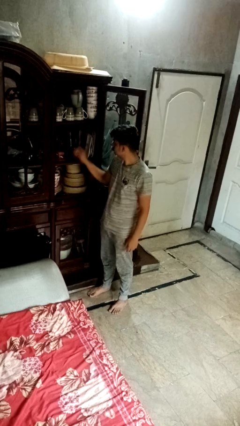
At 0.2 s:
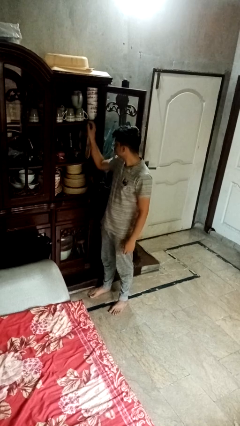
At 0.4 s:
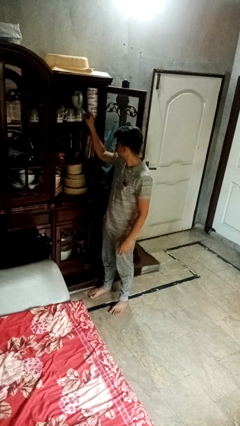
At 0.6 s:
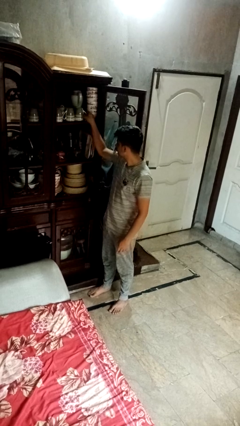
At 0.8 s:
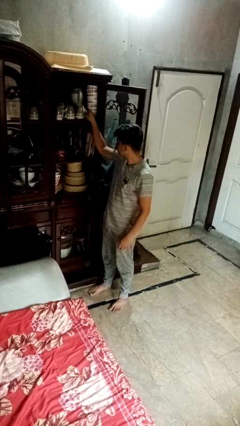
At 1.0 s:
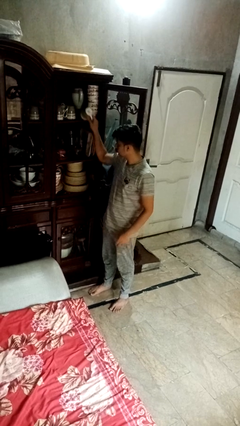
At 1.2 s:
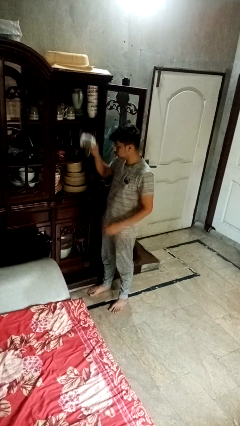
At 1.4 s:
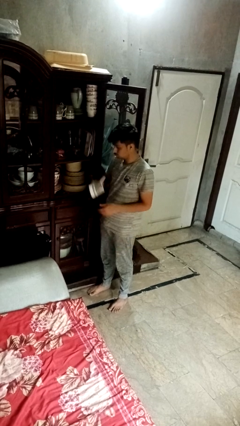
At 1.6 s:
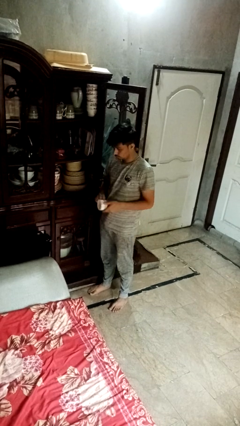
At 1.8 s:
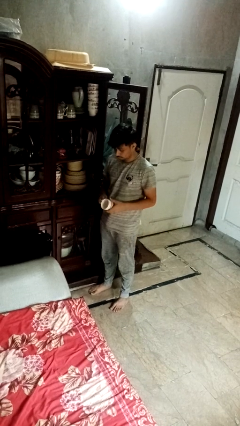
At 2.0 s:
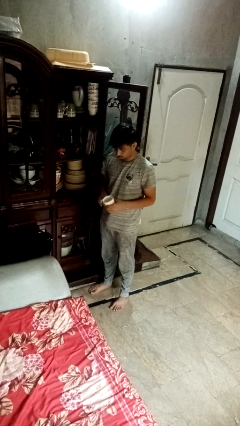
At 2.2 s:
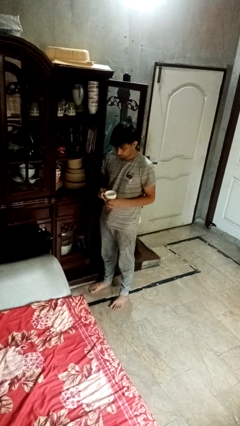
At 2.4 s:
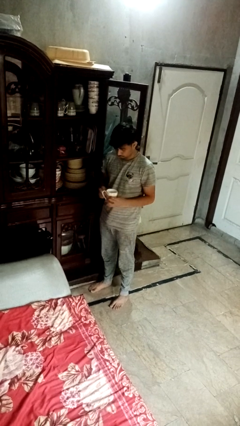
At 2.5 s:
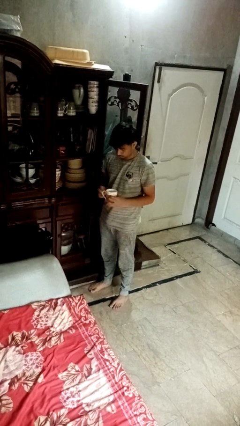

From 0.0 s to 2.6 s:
person takes object from cabinet

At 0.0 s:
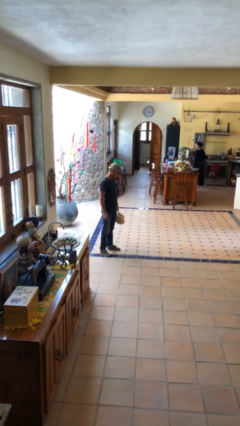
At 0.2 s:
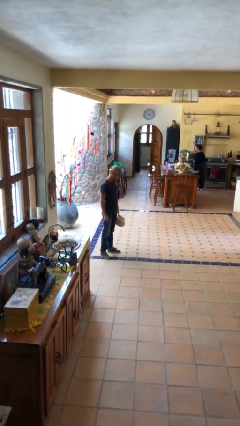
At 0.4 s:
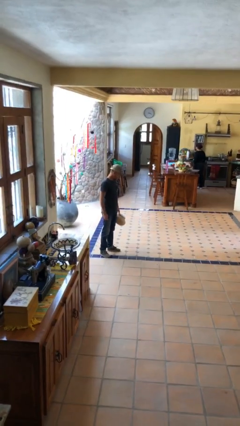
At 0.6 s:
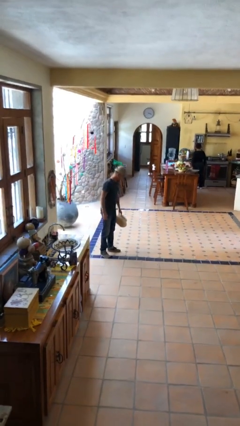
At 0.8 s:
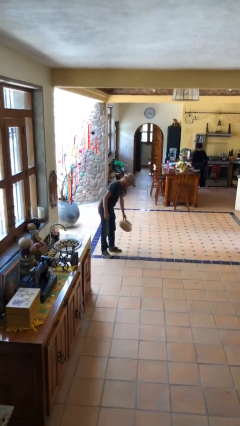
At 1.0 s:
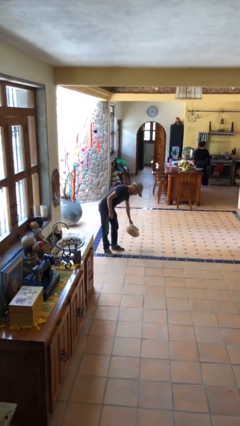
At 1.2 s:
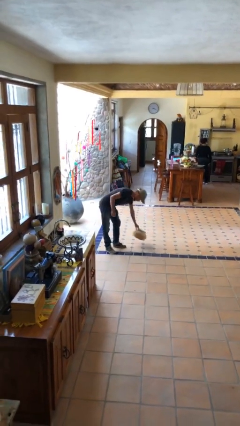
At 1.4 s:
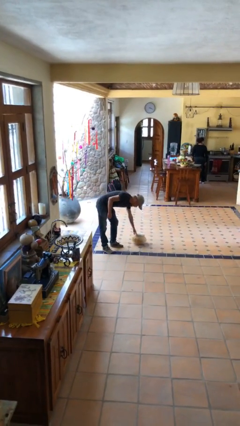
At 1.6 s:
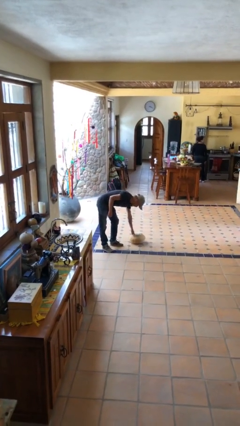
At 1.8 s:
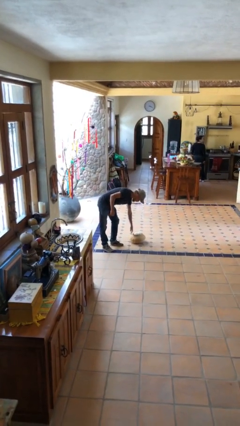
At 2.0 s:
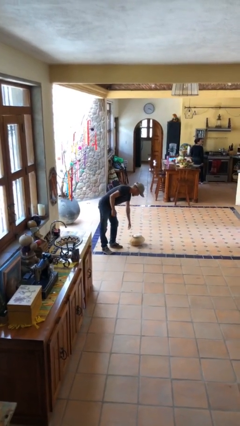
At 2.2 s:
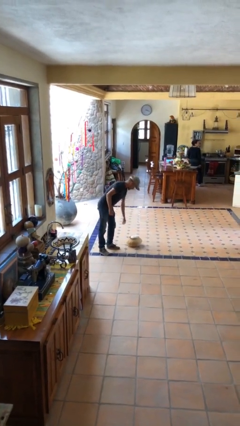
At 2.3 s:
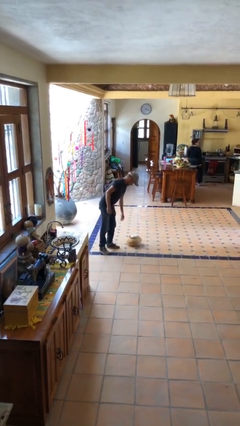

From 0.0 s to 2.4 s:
person puts down object on floor

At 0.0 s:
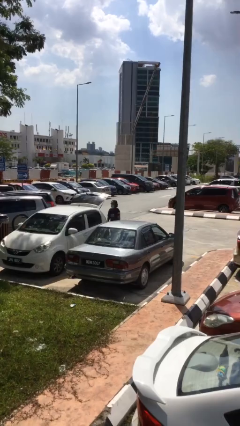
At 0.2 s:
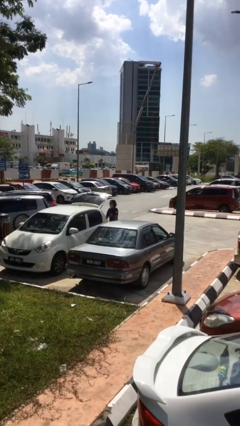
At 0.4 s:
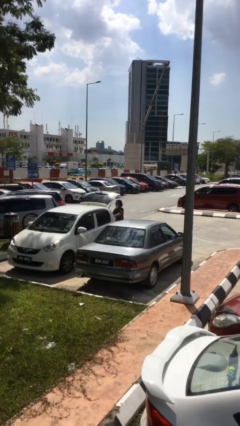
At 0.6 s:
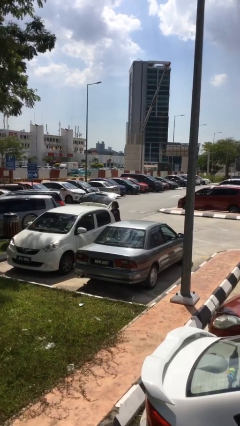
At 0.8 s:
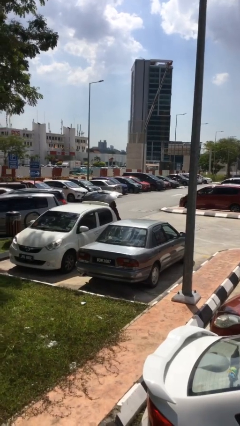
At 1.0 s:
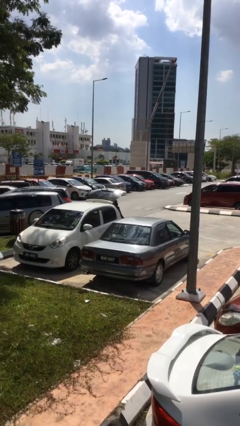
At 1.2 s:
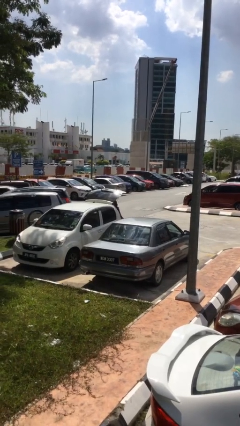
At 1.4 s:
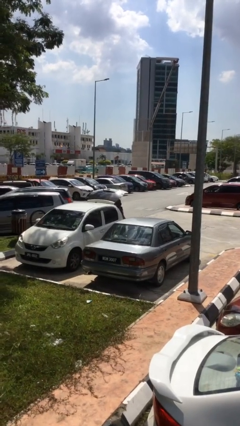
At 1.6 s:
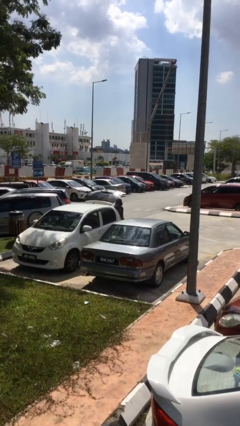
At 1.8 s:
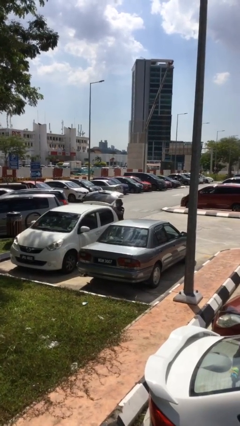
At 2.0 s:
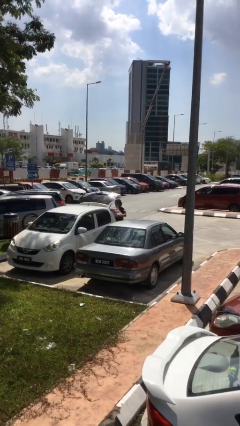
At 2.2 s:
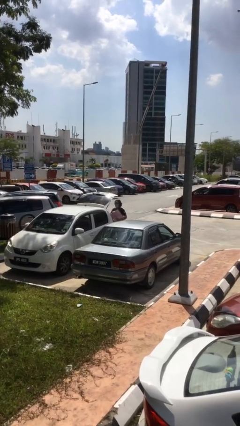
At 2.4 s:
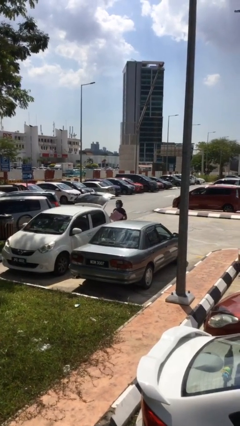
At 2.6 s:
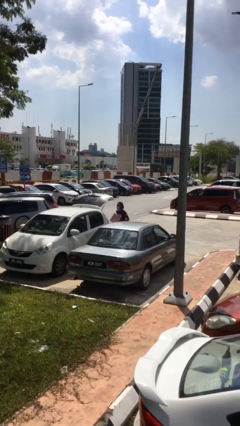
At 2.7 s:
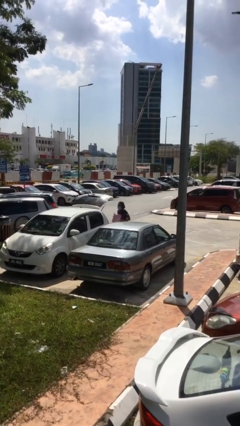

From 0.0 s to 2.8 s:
person unloads car

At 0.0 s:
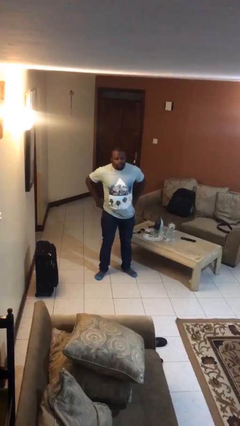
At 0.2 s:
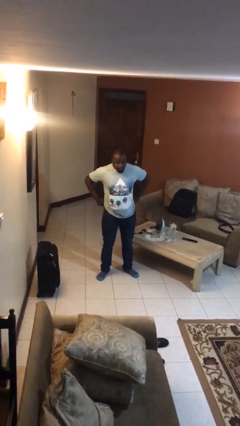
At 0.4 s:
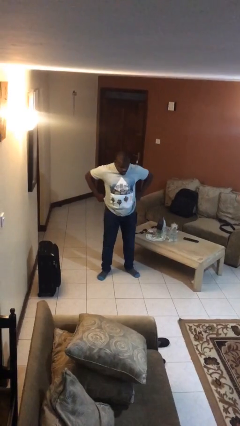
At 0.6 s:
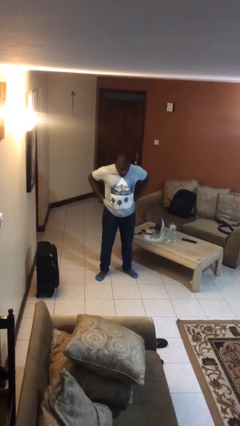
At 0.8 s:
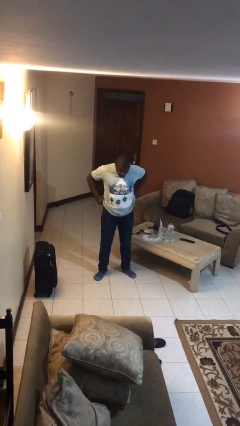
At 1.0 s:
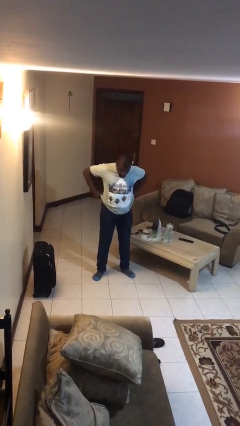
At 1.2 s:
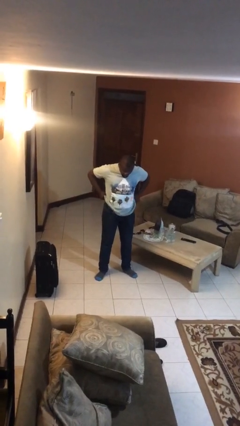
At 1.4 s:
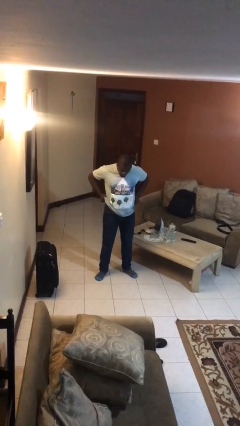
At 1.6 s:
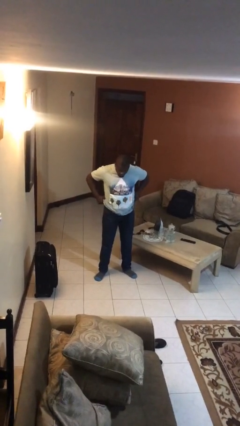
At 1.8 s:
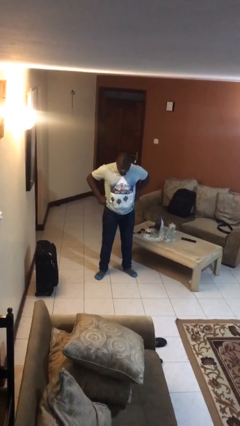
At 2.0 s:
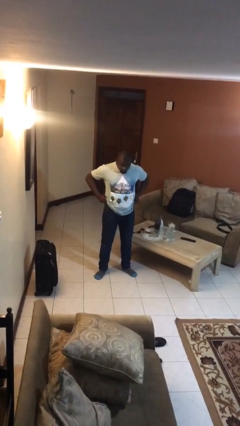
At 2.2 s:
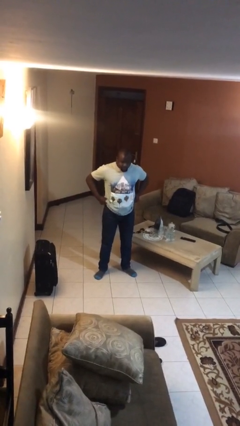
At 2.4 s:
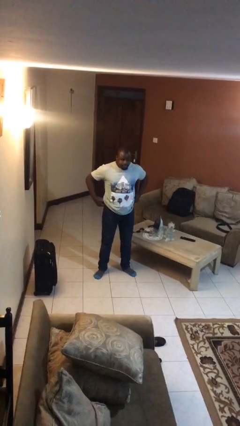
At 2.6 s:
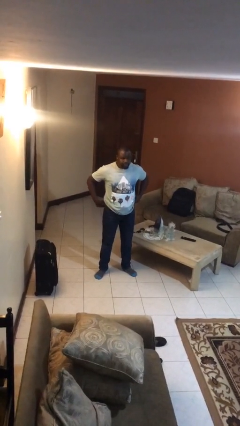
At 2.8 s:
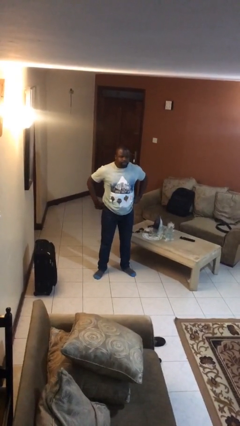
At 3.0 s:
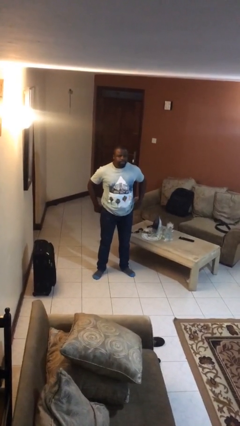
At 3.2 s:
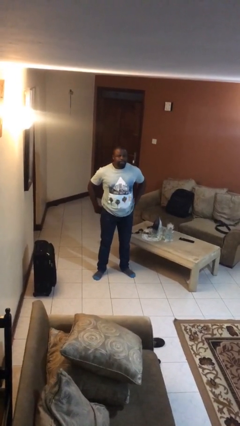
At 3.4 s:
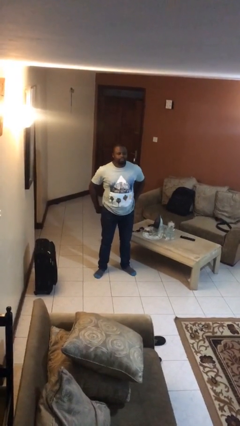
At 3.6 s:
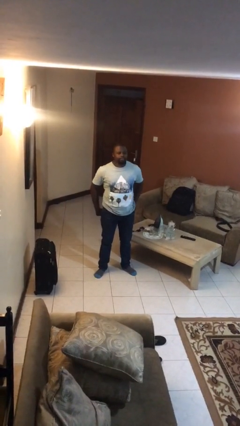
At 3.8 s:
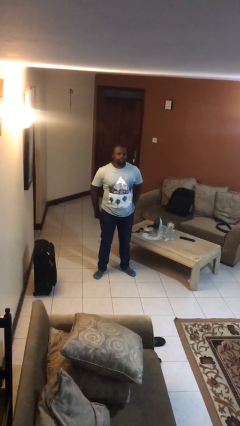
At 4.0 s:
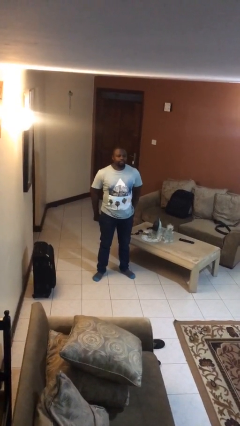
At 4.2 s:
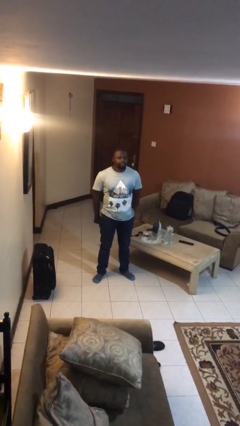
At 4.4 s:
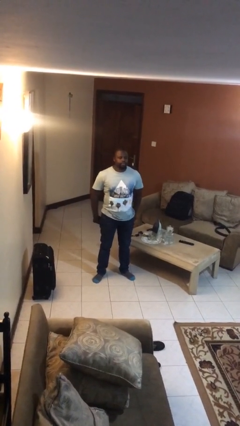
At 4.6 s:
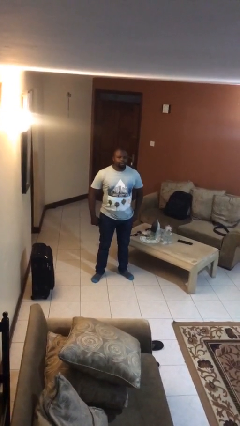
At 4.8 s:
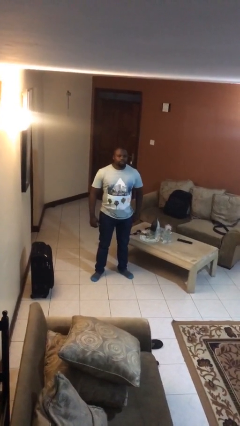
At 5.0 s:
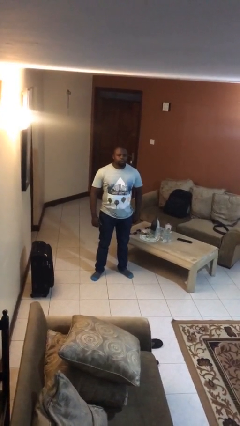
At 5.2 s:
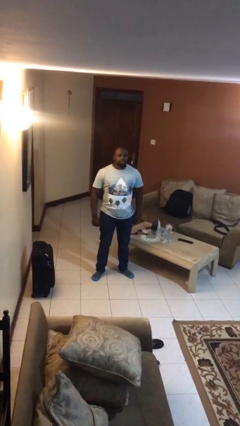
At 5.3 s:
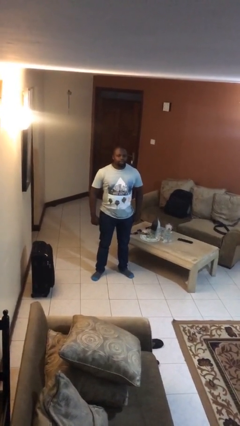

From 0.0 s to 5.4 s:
person hikes up pants

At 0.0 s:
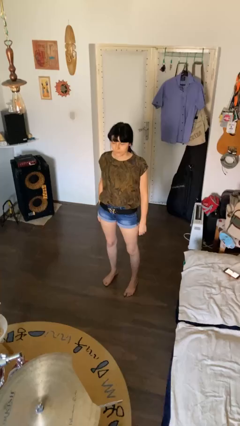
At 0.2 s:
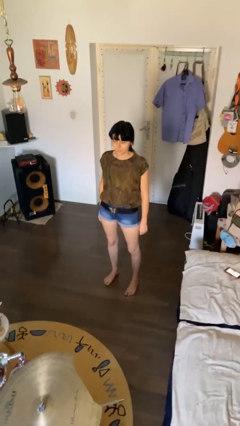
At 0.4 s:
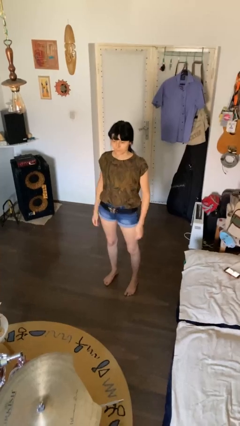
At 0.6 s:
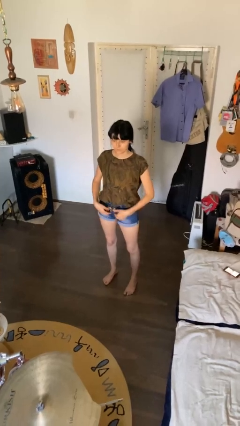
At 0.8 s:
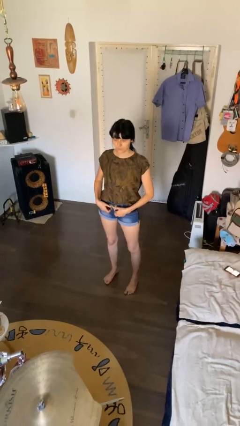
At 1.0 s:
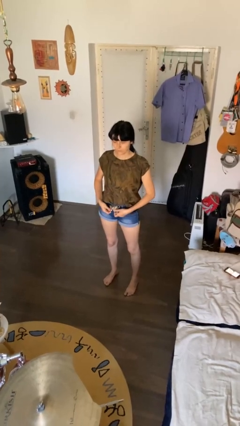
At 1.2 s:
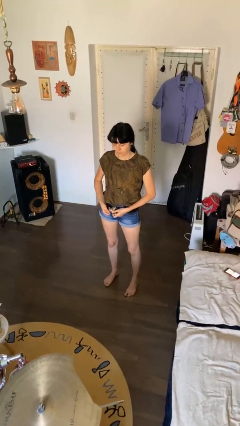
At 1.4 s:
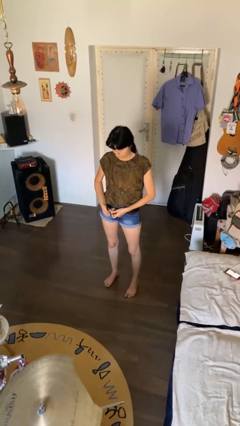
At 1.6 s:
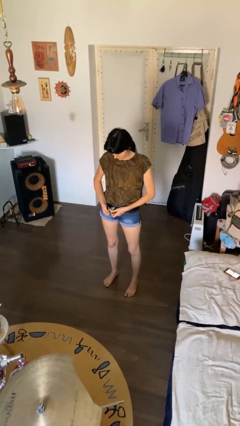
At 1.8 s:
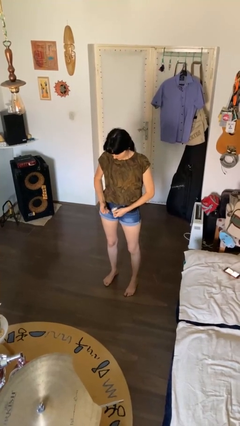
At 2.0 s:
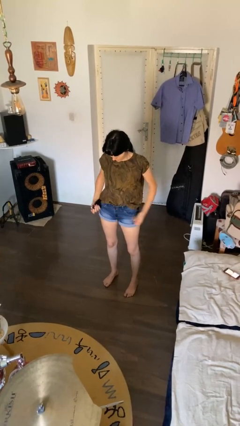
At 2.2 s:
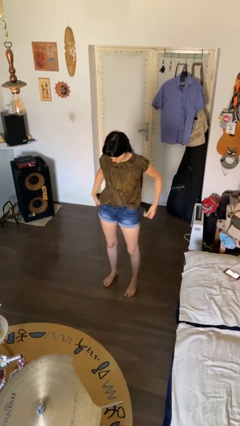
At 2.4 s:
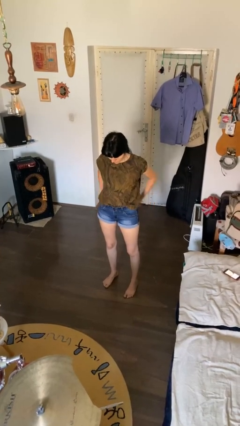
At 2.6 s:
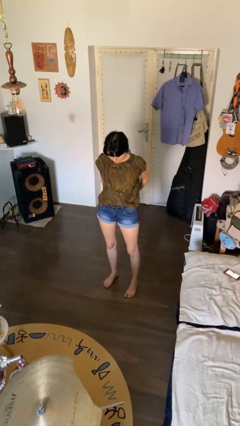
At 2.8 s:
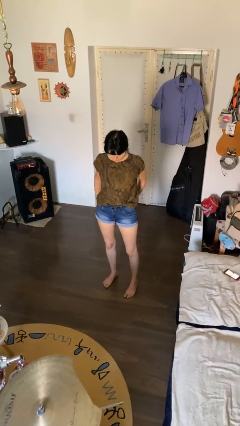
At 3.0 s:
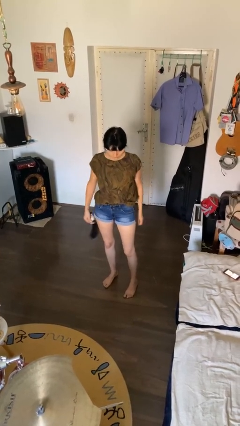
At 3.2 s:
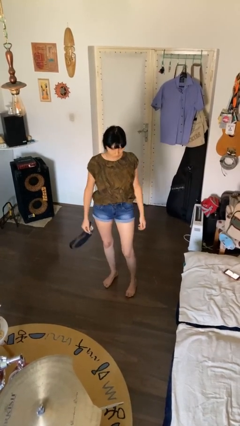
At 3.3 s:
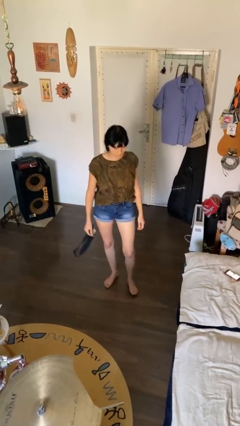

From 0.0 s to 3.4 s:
person takes off belt

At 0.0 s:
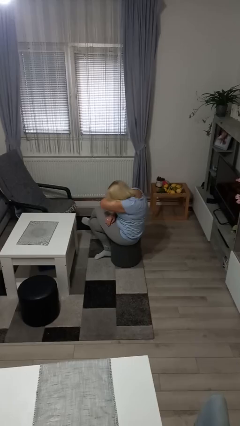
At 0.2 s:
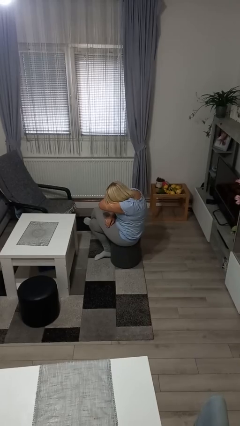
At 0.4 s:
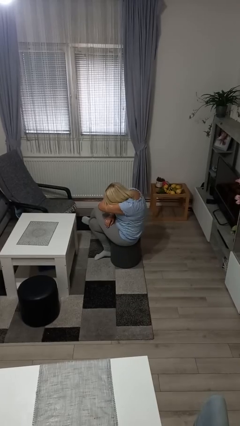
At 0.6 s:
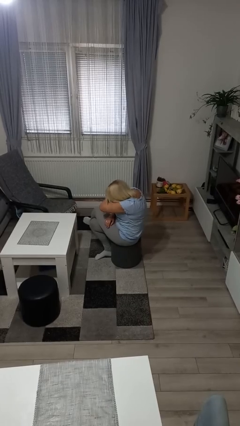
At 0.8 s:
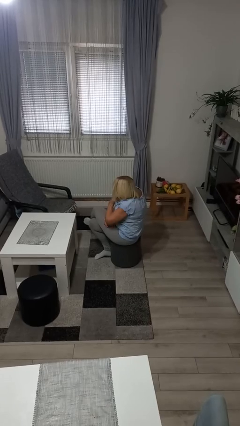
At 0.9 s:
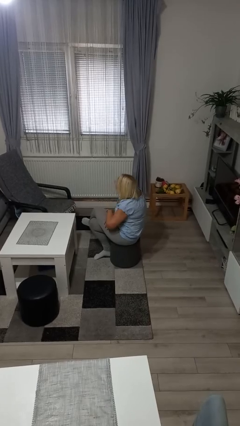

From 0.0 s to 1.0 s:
person sneezes into arm
